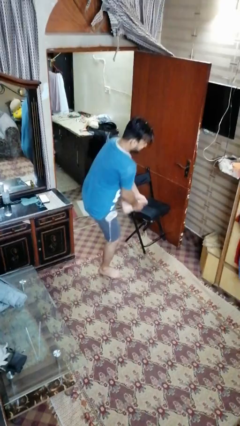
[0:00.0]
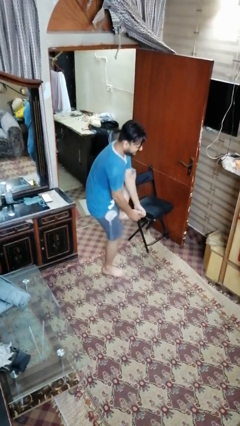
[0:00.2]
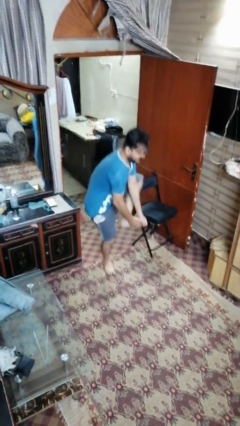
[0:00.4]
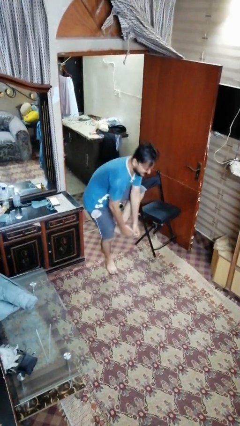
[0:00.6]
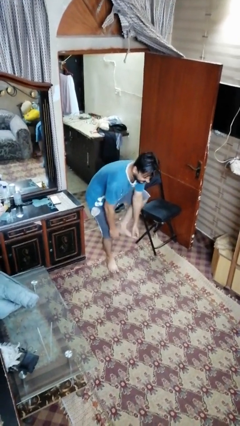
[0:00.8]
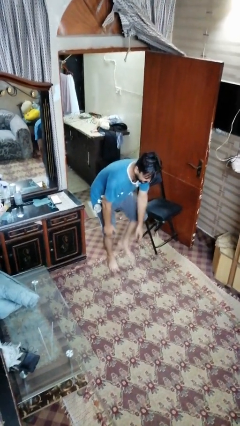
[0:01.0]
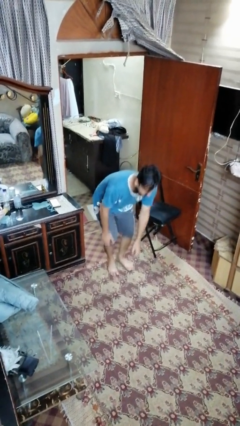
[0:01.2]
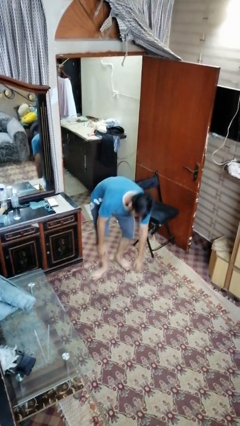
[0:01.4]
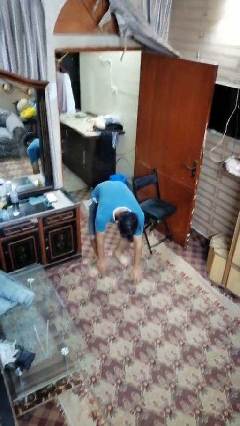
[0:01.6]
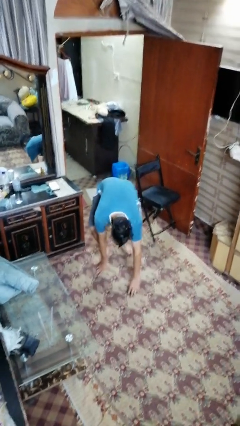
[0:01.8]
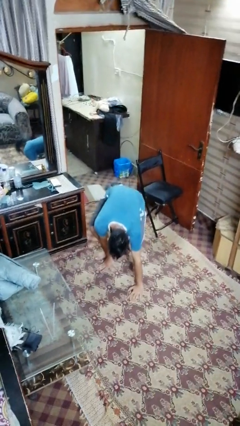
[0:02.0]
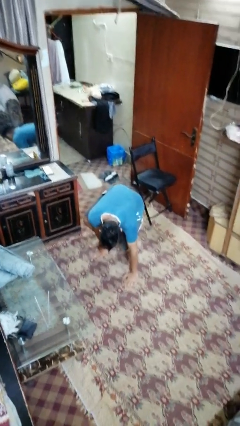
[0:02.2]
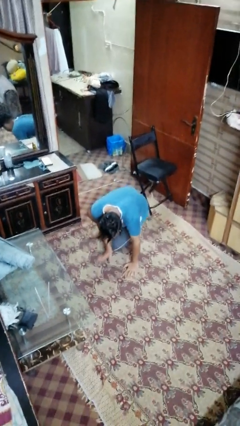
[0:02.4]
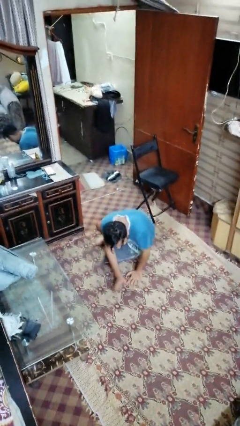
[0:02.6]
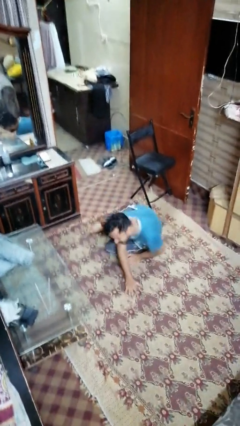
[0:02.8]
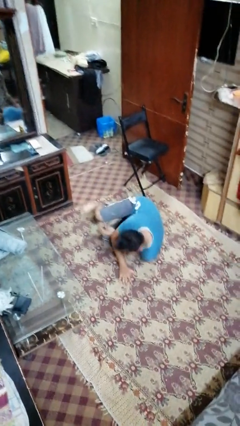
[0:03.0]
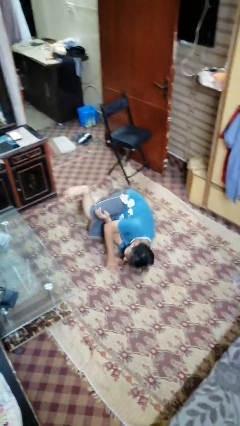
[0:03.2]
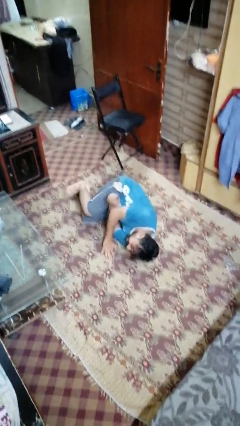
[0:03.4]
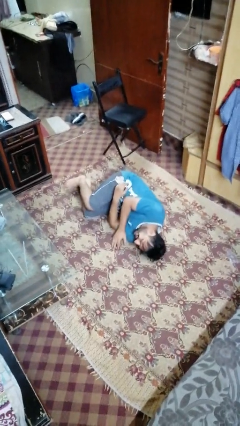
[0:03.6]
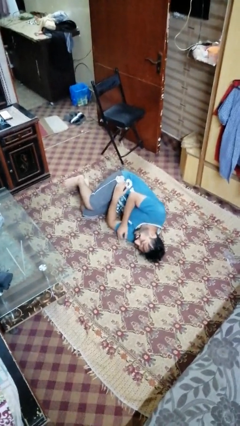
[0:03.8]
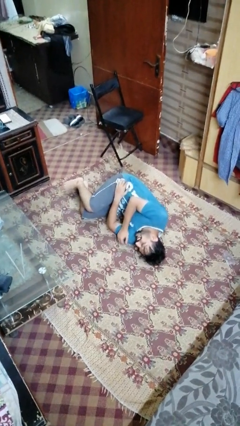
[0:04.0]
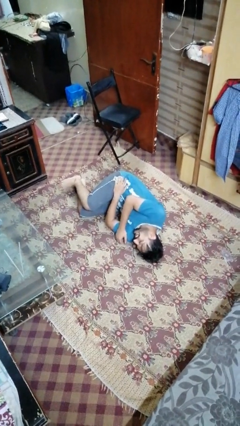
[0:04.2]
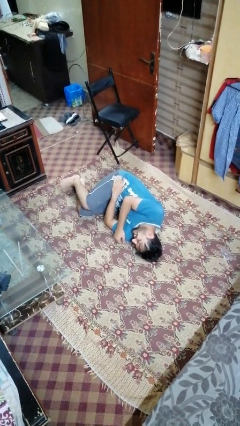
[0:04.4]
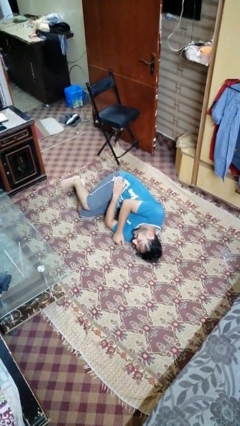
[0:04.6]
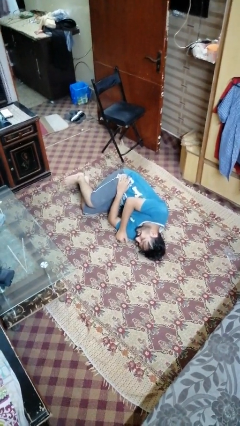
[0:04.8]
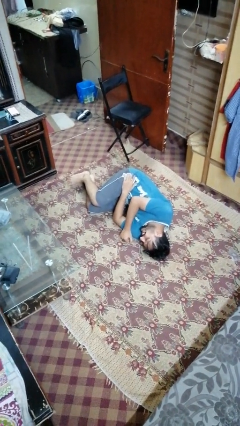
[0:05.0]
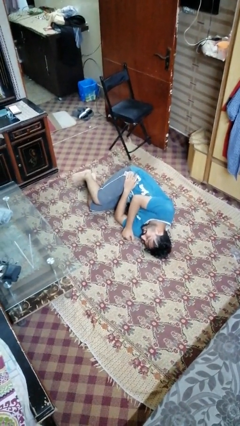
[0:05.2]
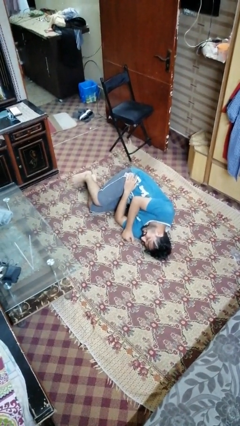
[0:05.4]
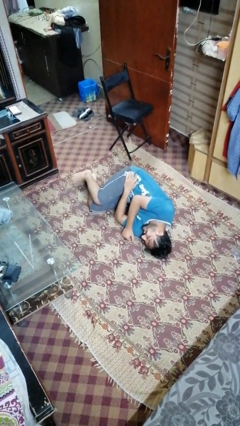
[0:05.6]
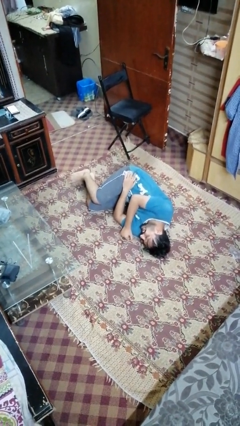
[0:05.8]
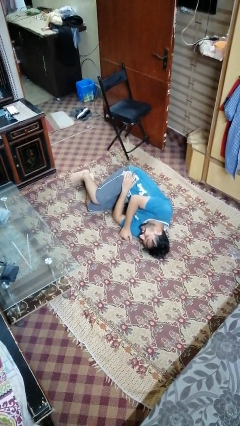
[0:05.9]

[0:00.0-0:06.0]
person lies down on floor

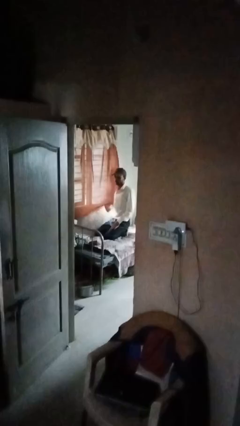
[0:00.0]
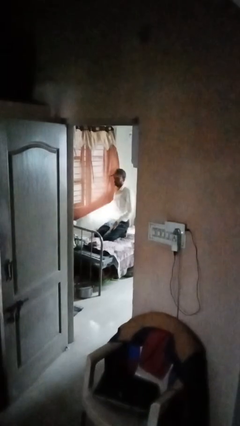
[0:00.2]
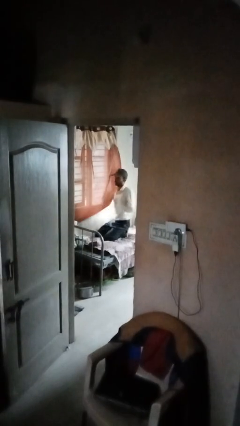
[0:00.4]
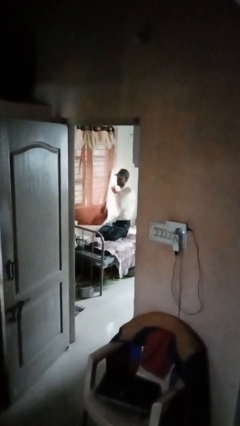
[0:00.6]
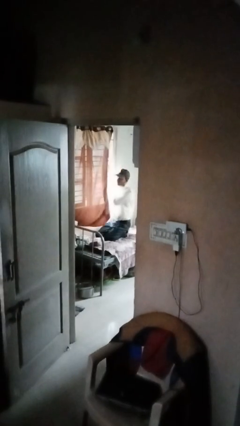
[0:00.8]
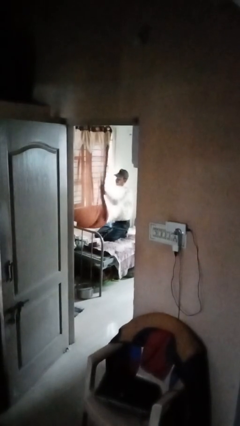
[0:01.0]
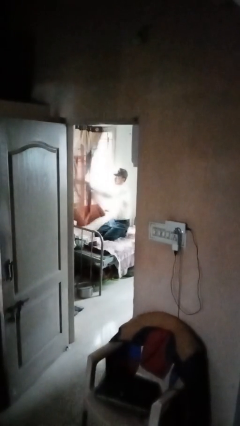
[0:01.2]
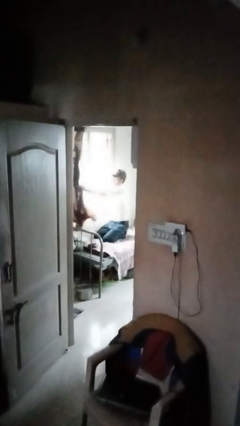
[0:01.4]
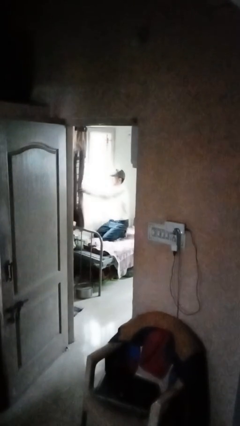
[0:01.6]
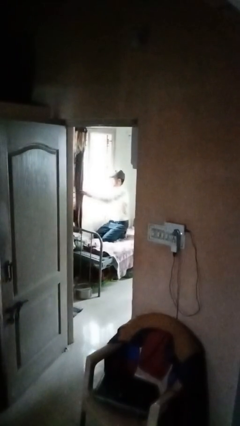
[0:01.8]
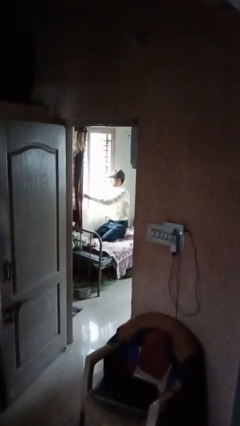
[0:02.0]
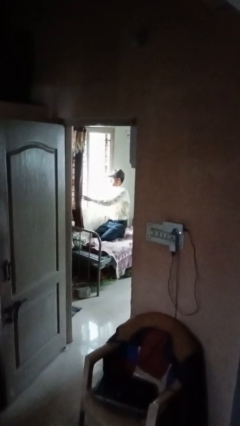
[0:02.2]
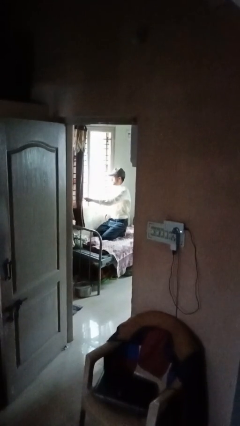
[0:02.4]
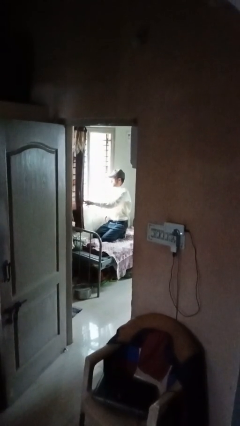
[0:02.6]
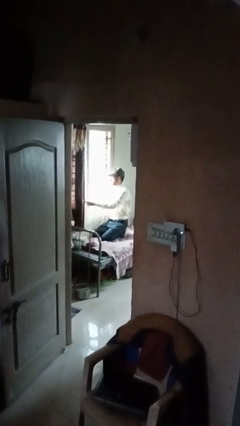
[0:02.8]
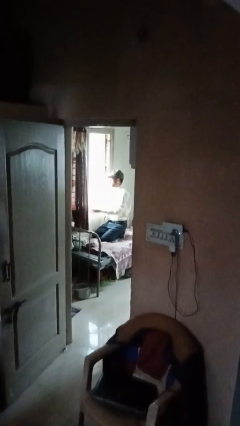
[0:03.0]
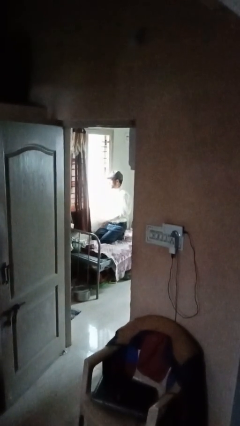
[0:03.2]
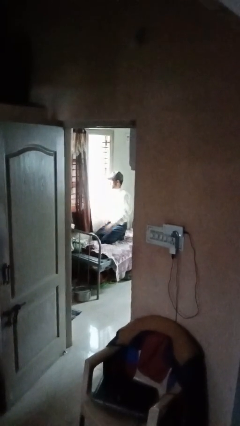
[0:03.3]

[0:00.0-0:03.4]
person opens curtains

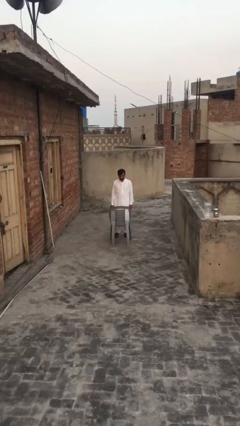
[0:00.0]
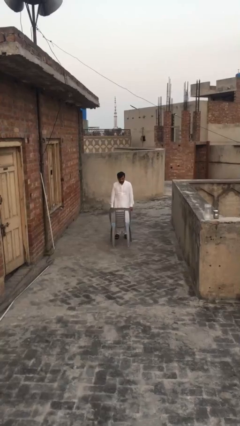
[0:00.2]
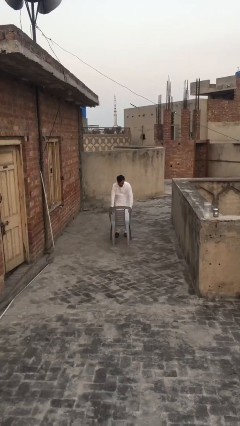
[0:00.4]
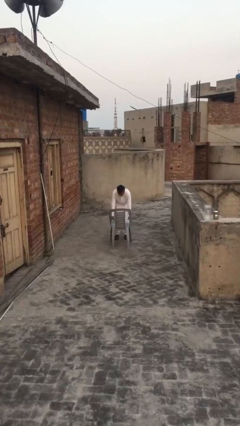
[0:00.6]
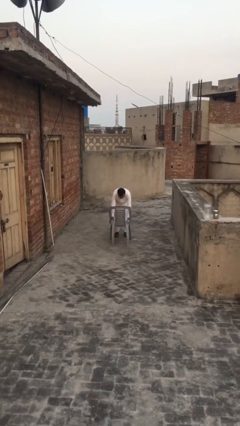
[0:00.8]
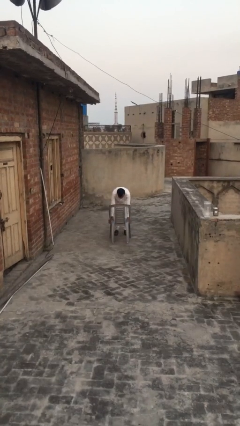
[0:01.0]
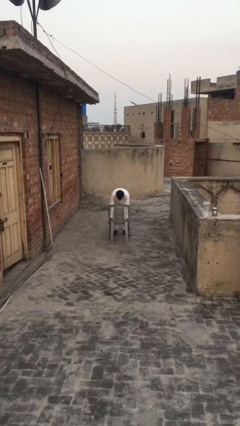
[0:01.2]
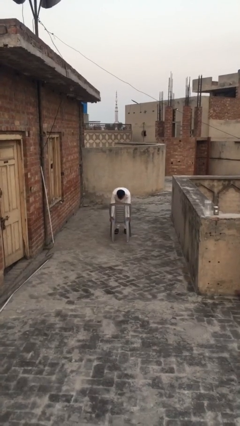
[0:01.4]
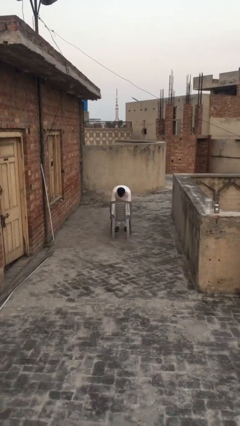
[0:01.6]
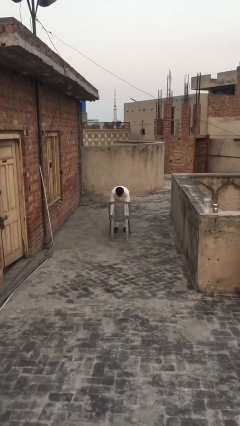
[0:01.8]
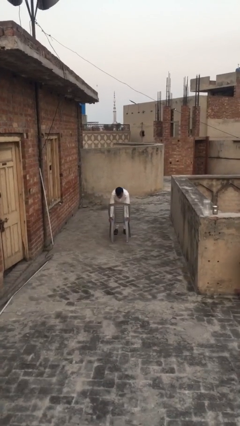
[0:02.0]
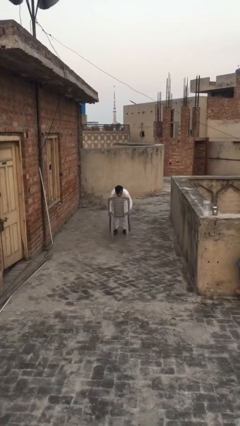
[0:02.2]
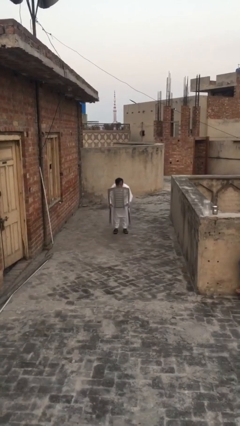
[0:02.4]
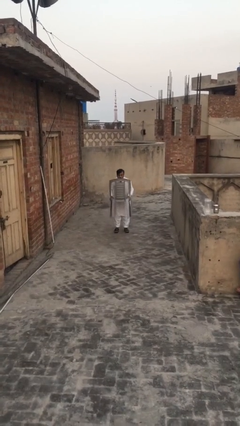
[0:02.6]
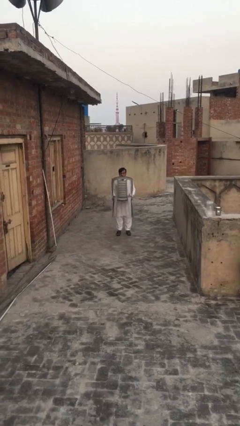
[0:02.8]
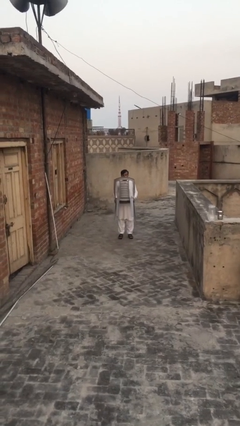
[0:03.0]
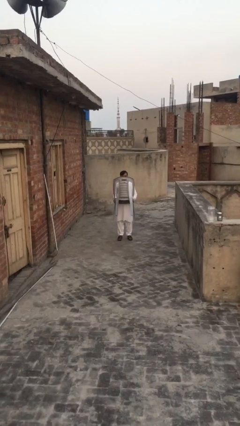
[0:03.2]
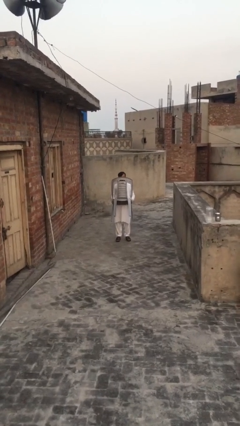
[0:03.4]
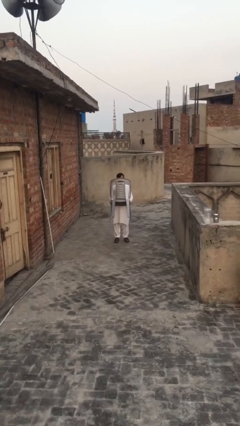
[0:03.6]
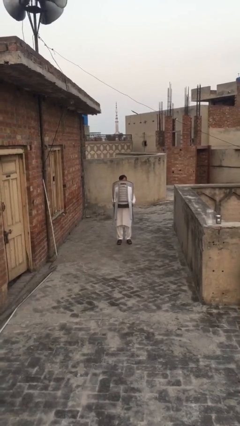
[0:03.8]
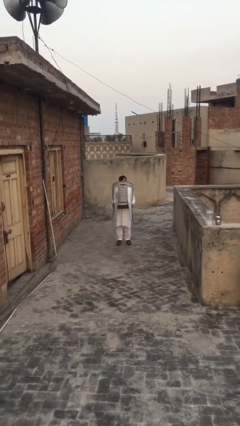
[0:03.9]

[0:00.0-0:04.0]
person picks up object from floor

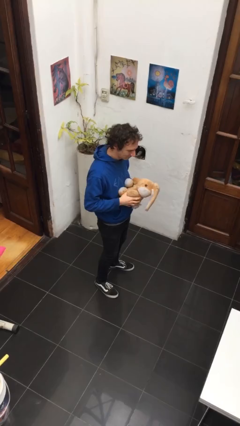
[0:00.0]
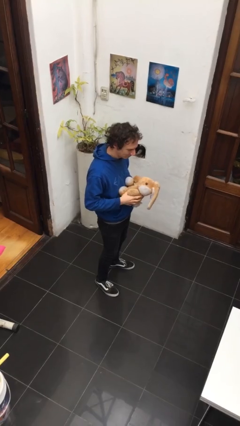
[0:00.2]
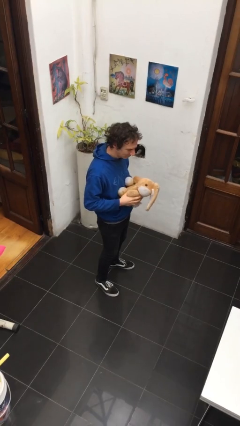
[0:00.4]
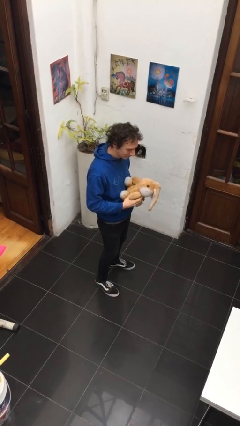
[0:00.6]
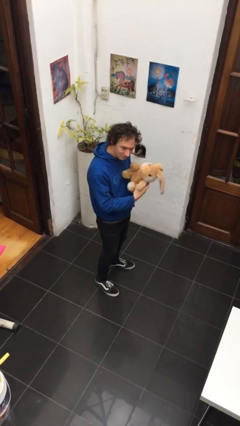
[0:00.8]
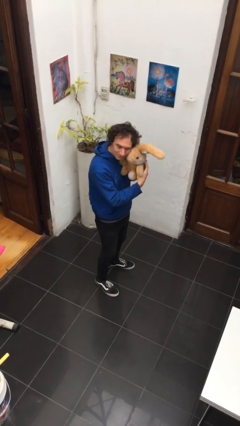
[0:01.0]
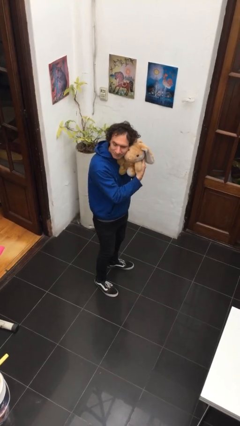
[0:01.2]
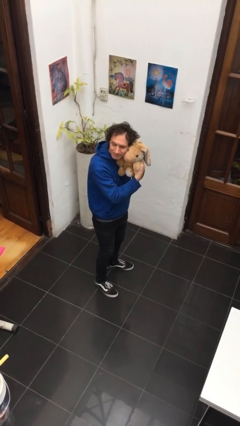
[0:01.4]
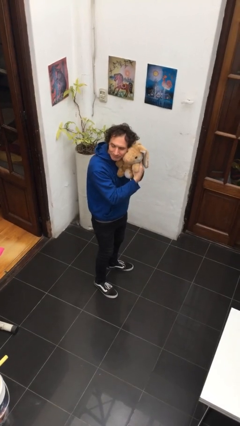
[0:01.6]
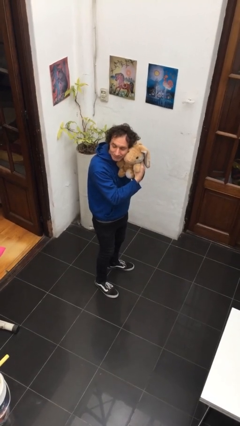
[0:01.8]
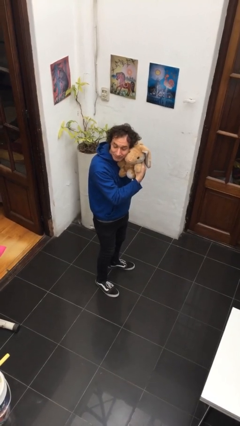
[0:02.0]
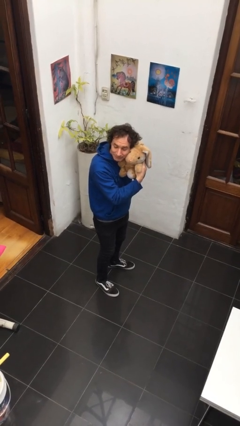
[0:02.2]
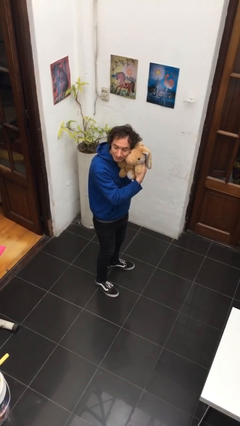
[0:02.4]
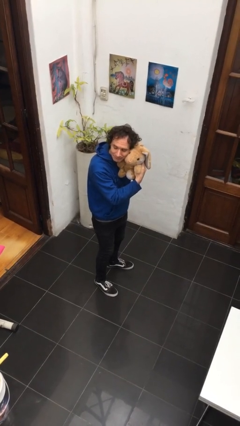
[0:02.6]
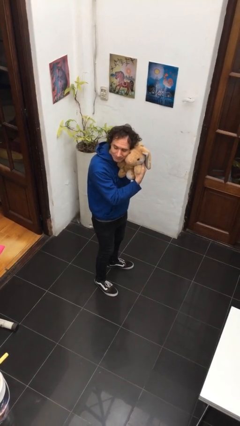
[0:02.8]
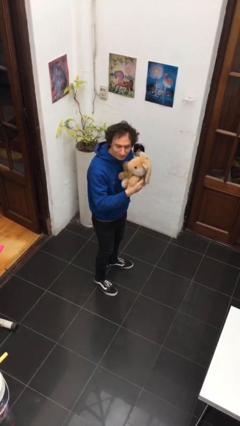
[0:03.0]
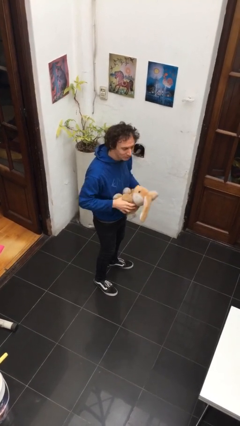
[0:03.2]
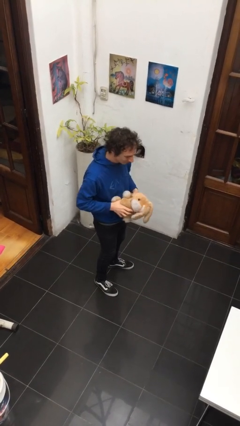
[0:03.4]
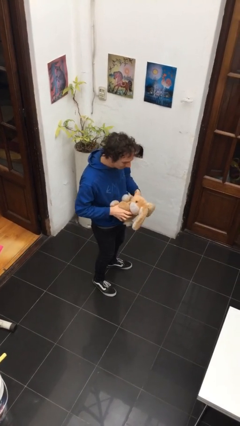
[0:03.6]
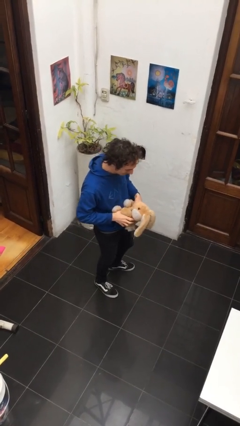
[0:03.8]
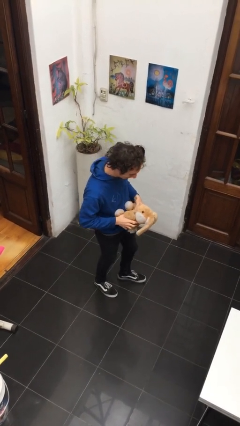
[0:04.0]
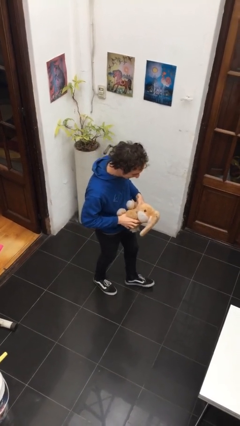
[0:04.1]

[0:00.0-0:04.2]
person hugs stuffed animal
